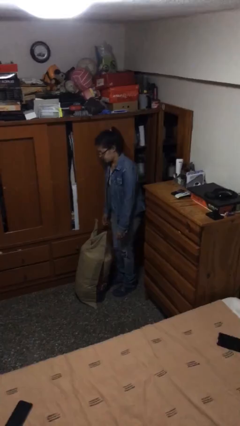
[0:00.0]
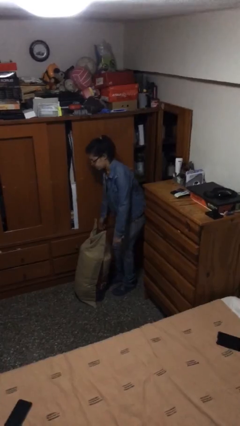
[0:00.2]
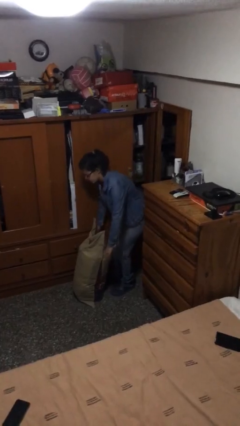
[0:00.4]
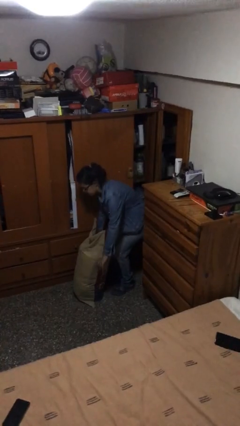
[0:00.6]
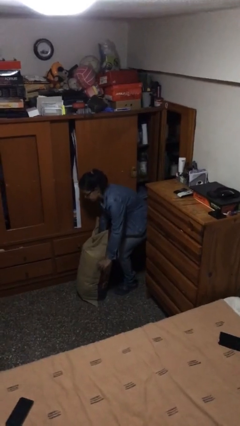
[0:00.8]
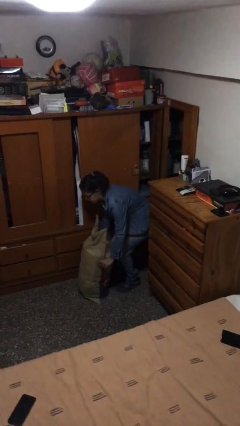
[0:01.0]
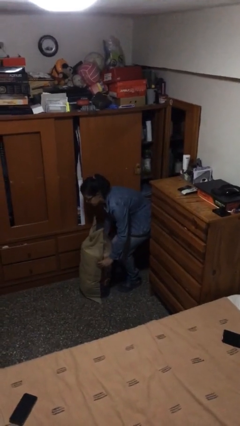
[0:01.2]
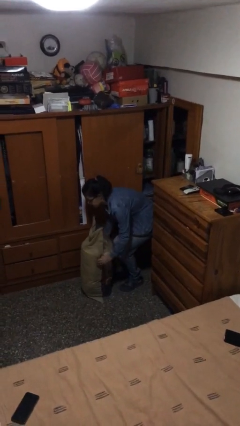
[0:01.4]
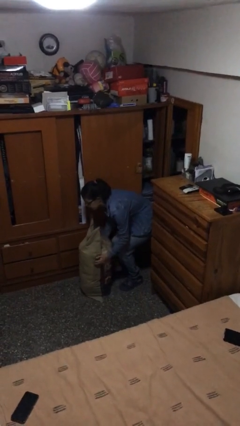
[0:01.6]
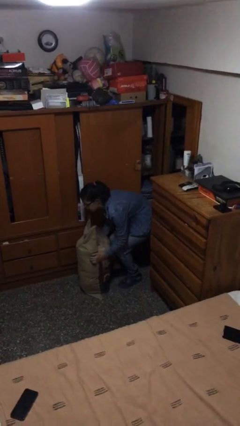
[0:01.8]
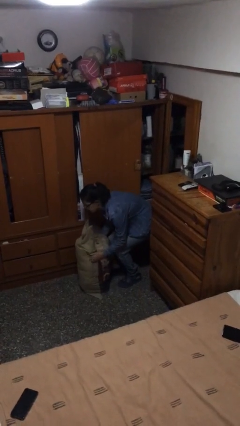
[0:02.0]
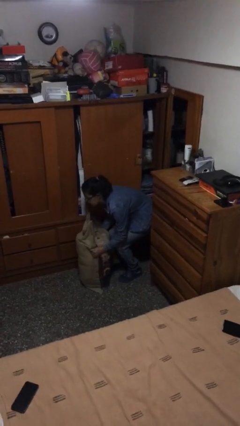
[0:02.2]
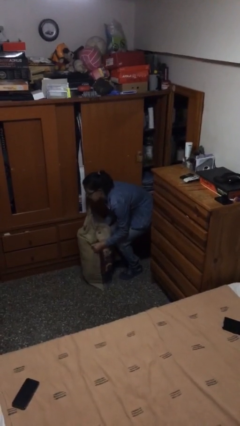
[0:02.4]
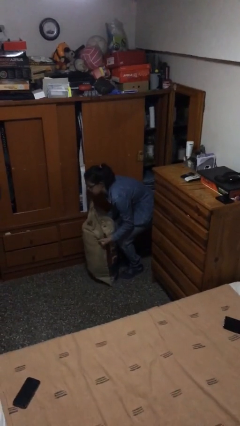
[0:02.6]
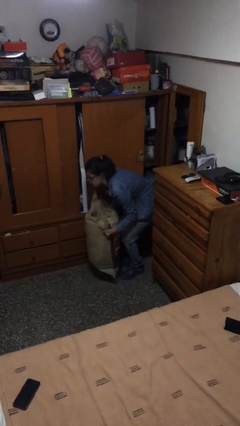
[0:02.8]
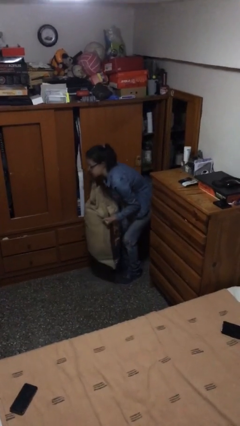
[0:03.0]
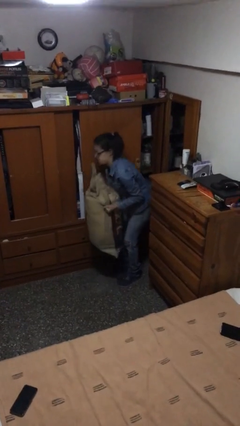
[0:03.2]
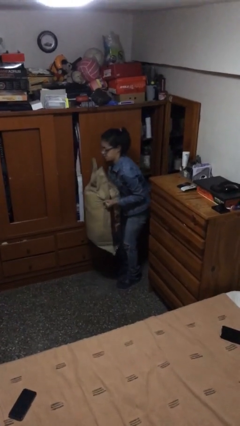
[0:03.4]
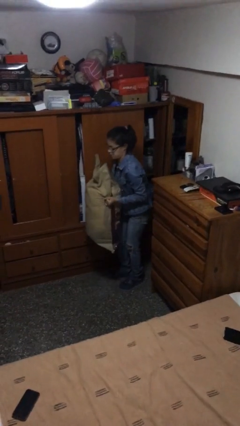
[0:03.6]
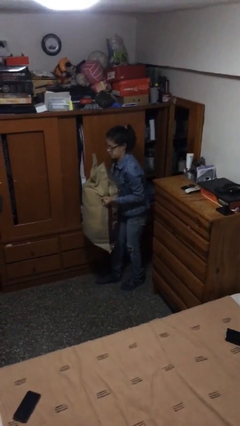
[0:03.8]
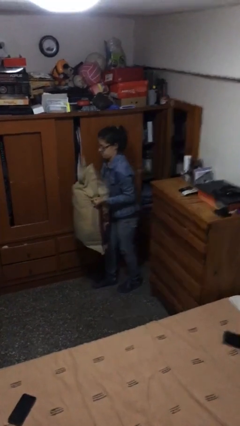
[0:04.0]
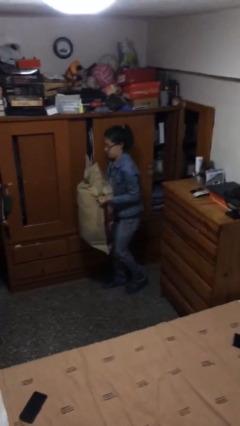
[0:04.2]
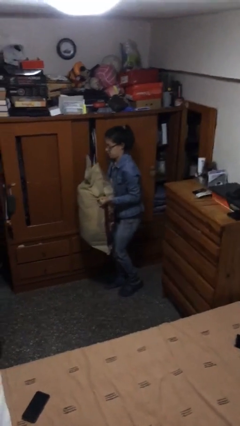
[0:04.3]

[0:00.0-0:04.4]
person picks up object from floor

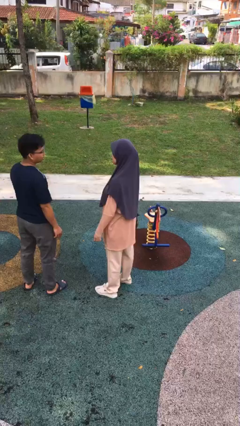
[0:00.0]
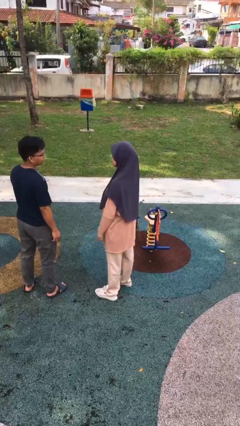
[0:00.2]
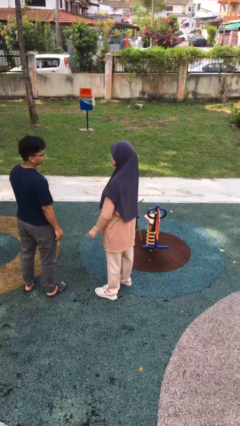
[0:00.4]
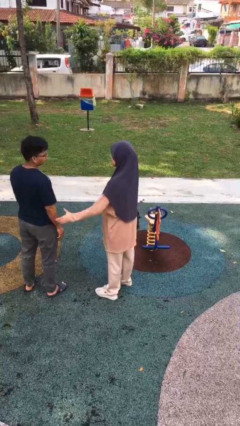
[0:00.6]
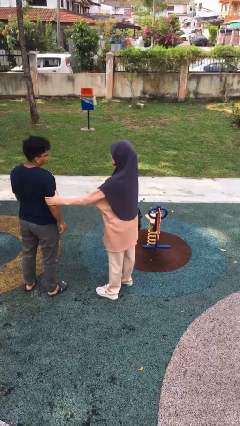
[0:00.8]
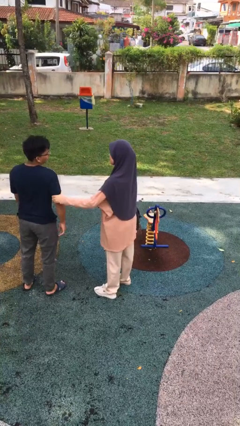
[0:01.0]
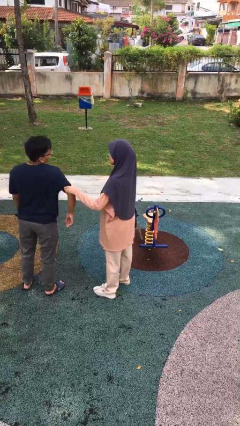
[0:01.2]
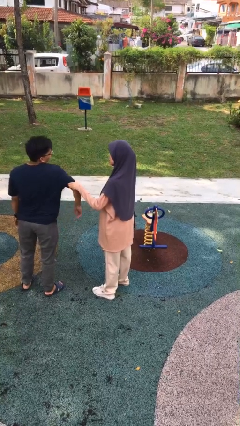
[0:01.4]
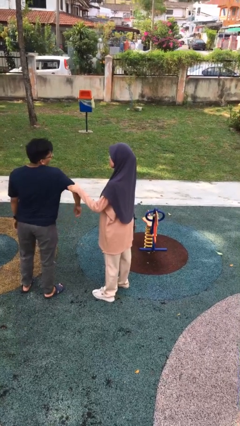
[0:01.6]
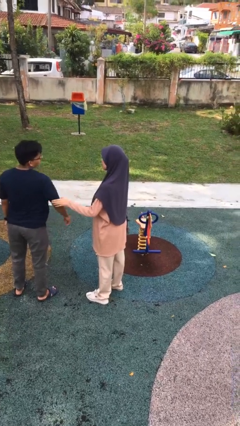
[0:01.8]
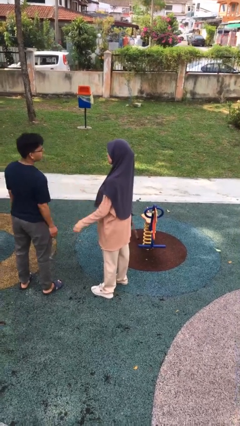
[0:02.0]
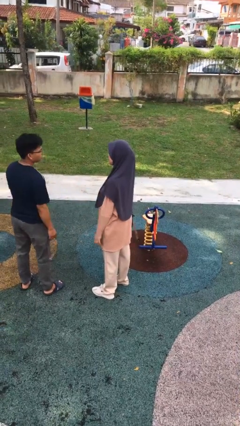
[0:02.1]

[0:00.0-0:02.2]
person grabs person by bicep

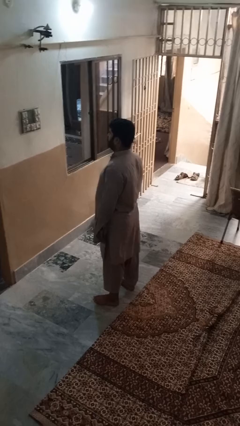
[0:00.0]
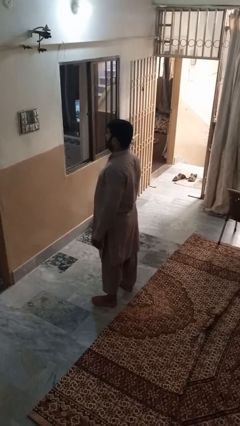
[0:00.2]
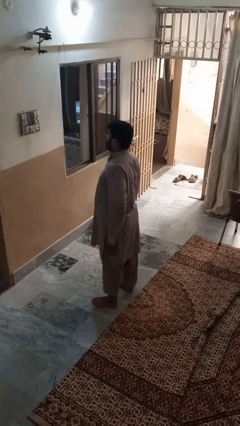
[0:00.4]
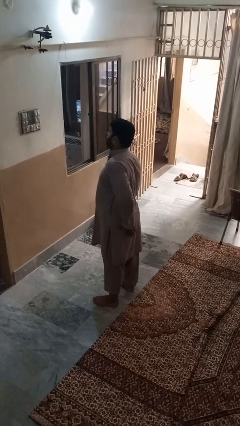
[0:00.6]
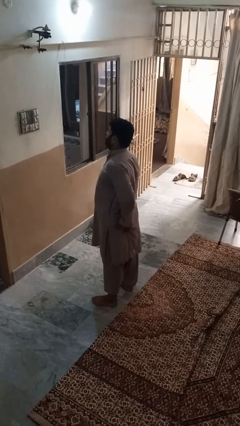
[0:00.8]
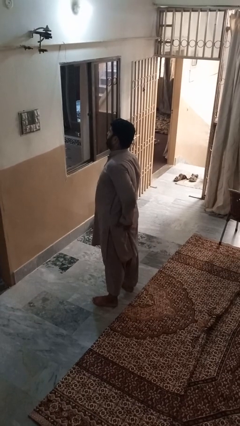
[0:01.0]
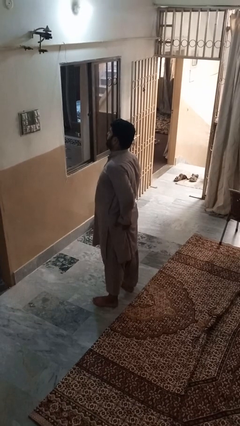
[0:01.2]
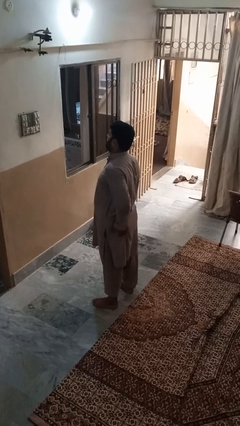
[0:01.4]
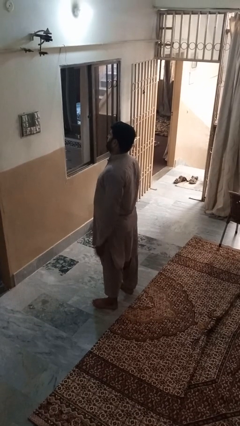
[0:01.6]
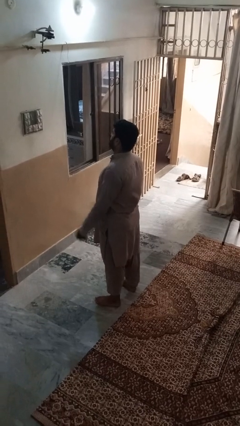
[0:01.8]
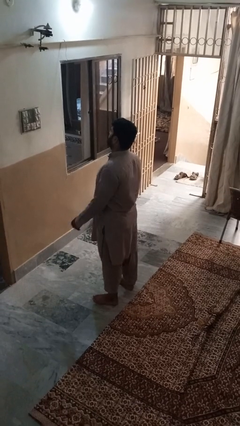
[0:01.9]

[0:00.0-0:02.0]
person wiggles hips

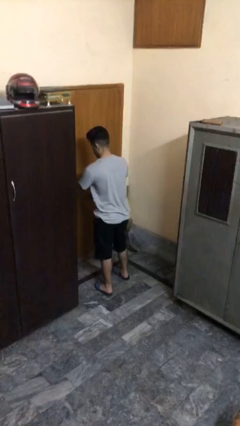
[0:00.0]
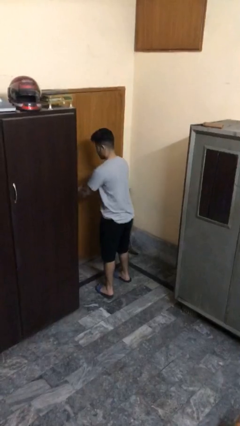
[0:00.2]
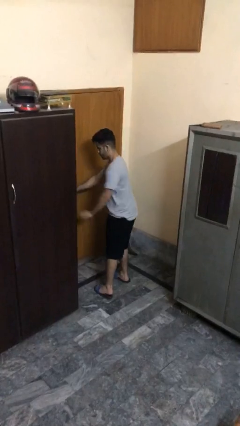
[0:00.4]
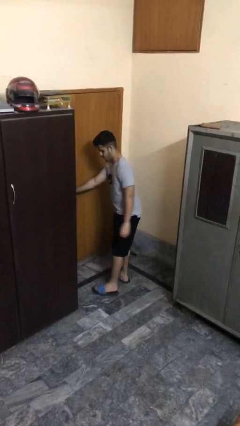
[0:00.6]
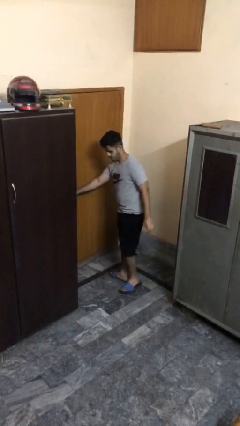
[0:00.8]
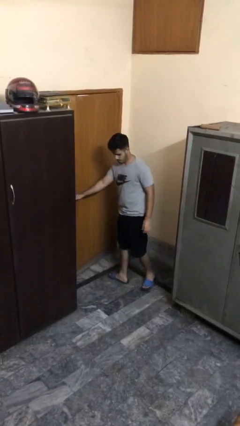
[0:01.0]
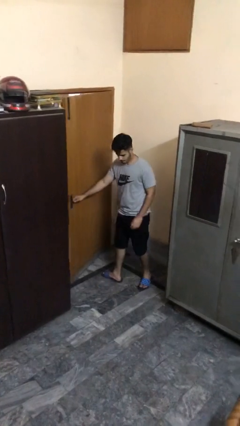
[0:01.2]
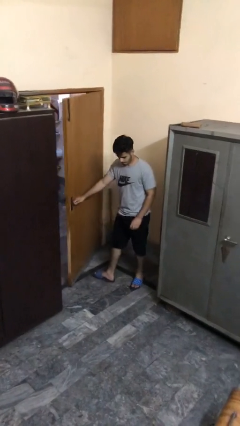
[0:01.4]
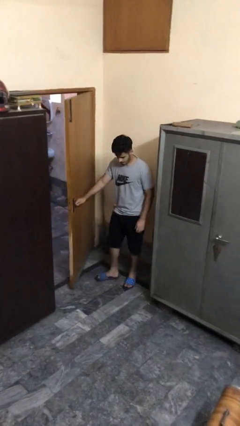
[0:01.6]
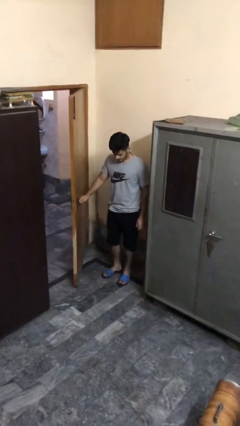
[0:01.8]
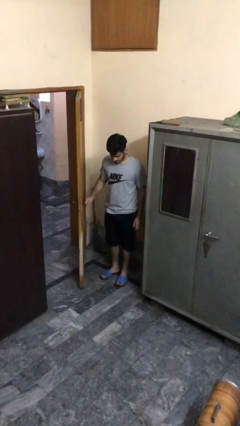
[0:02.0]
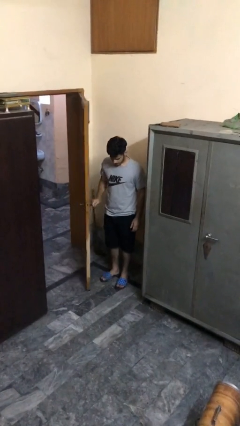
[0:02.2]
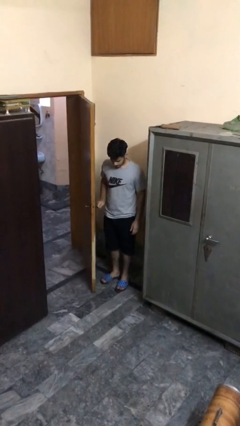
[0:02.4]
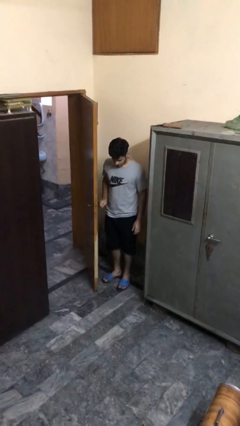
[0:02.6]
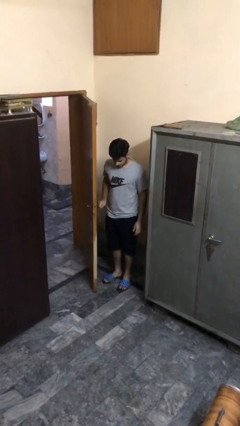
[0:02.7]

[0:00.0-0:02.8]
person opens facility door

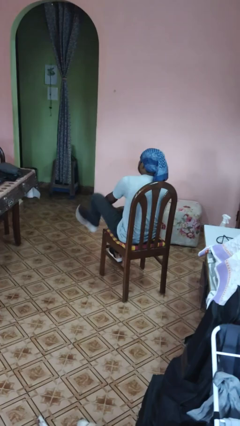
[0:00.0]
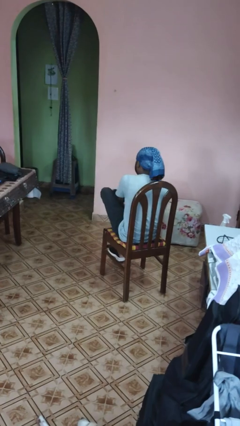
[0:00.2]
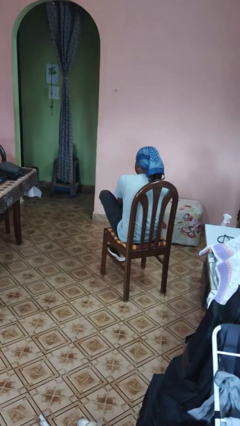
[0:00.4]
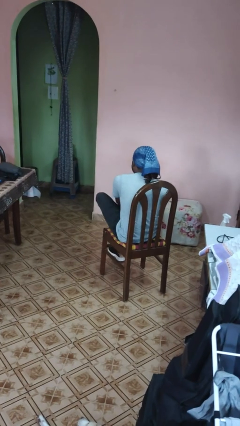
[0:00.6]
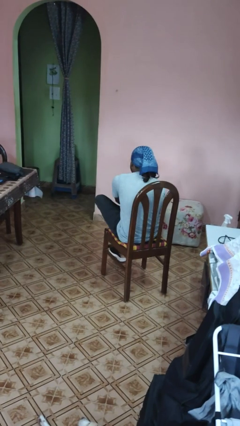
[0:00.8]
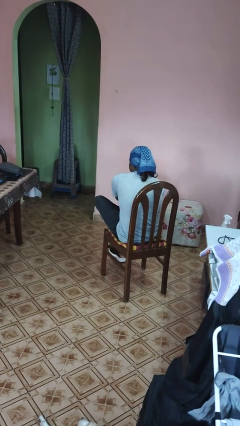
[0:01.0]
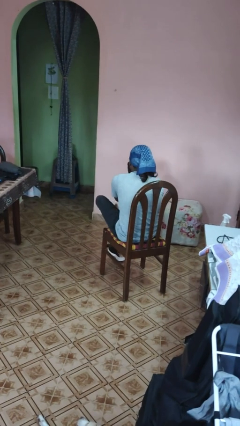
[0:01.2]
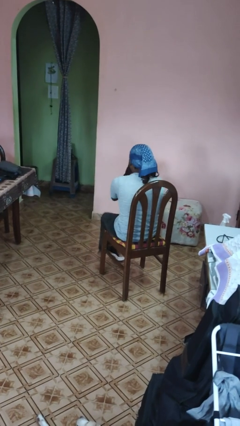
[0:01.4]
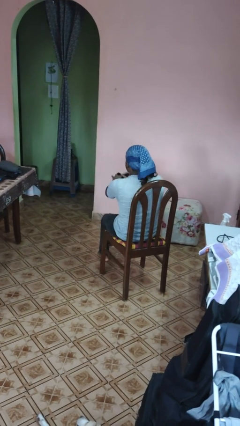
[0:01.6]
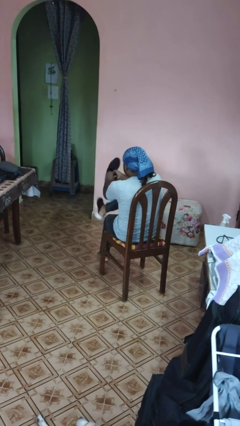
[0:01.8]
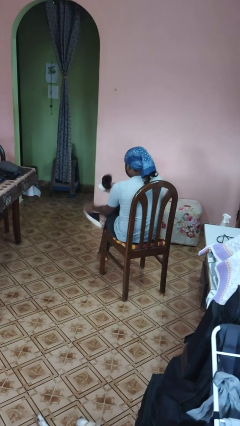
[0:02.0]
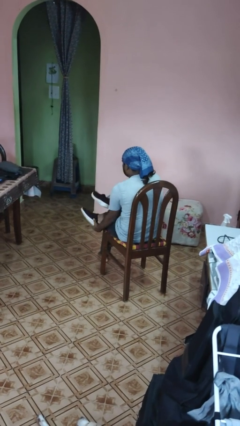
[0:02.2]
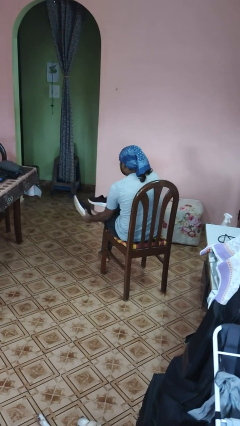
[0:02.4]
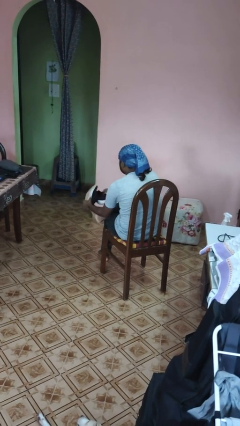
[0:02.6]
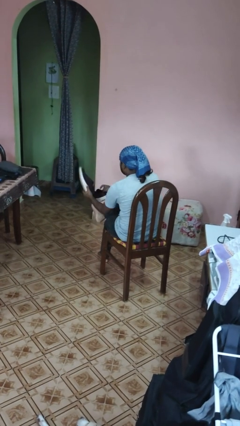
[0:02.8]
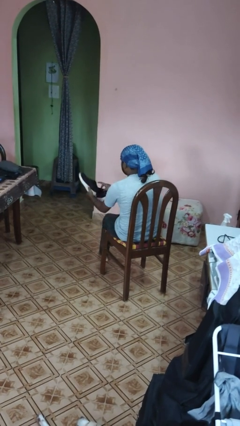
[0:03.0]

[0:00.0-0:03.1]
person takes off shoes

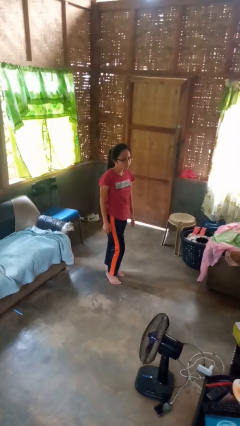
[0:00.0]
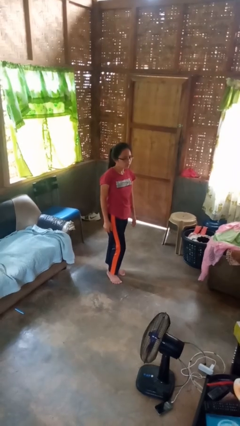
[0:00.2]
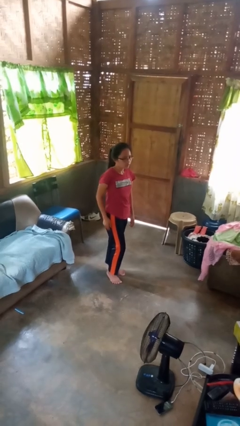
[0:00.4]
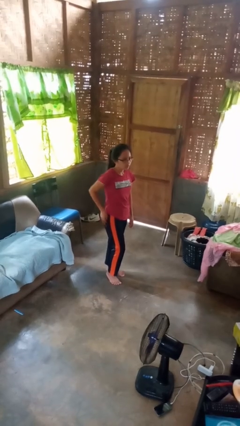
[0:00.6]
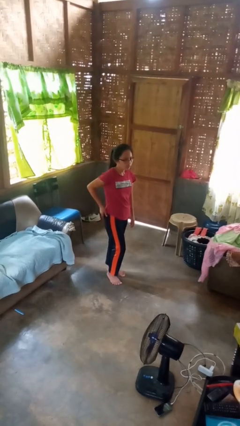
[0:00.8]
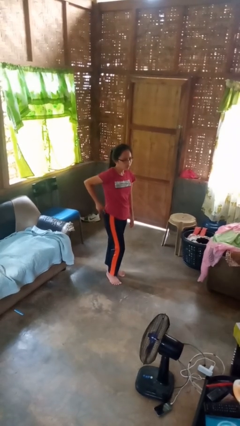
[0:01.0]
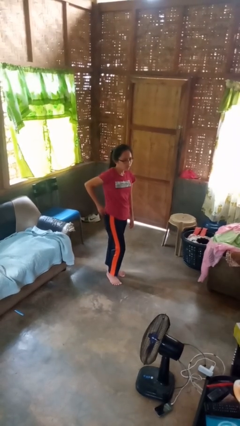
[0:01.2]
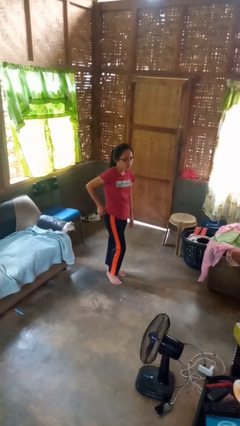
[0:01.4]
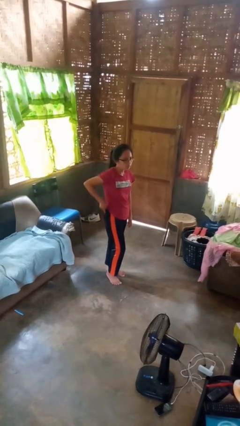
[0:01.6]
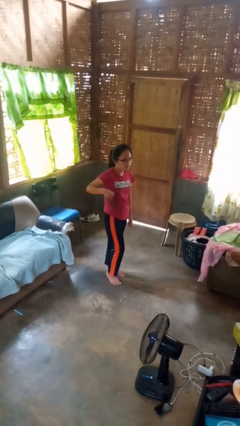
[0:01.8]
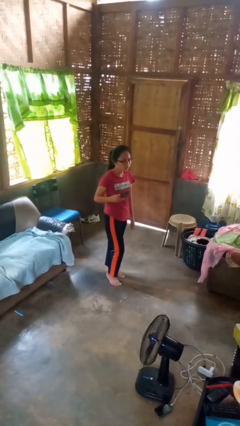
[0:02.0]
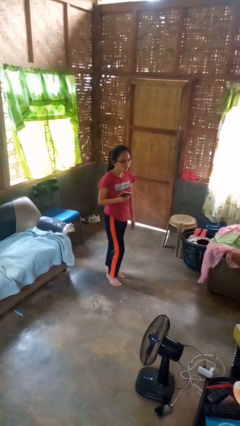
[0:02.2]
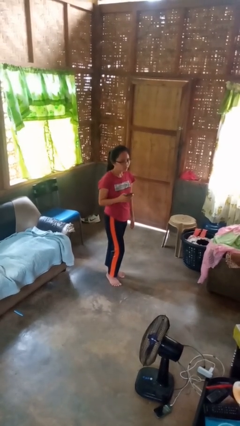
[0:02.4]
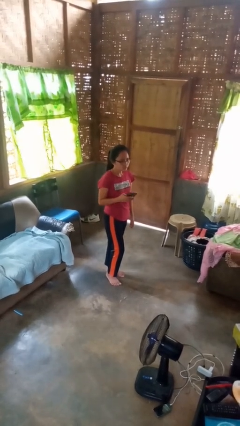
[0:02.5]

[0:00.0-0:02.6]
person takes phone from pocket
